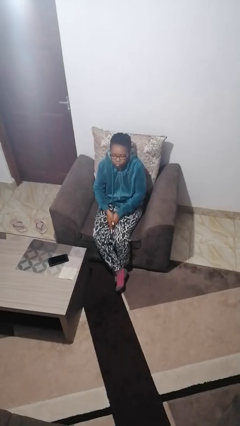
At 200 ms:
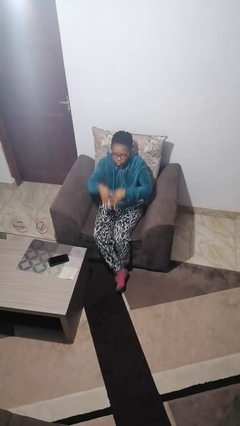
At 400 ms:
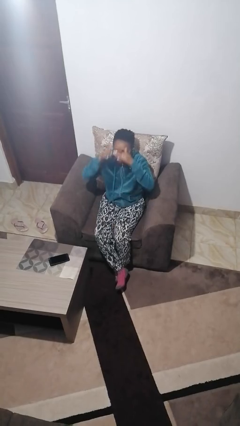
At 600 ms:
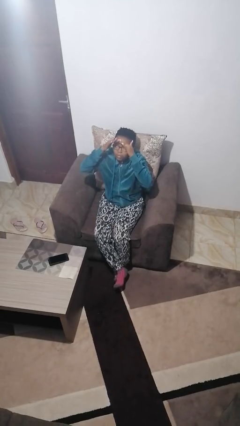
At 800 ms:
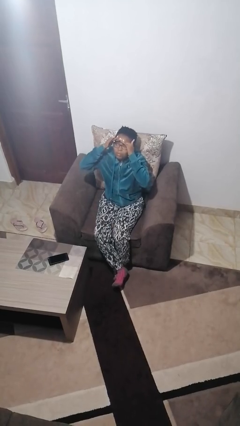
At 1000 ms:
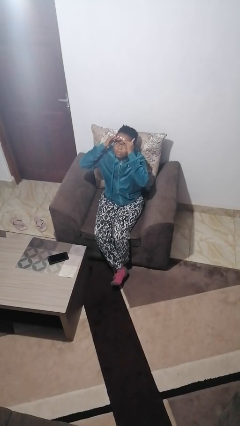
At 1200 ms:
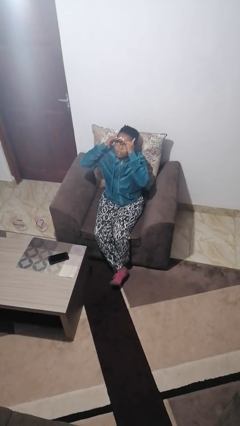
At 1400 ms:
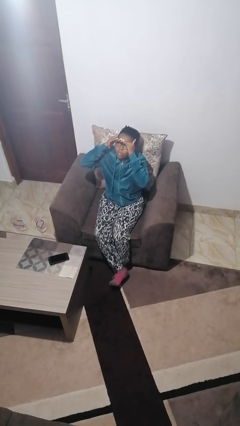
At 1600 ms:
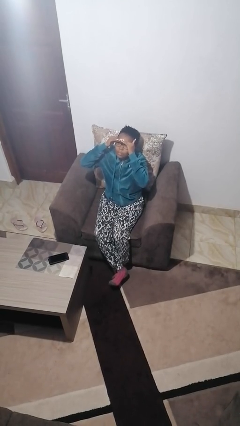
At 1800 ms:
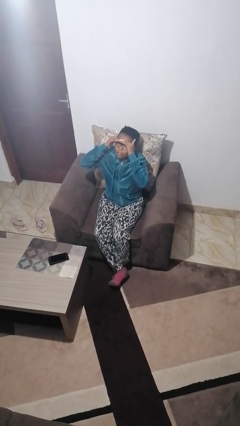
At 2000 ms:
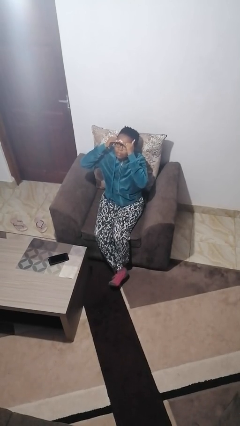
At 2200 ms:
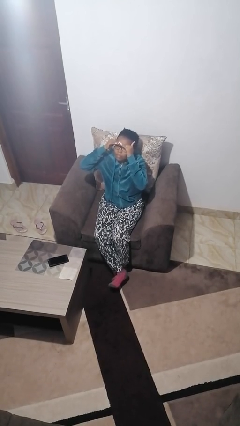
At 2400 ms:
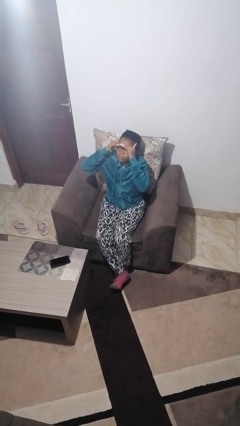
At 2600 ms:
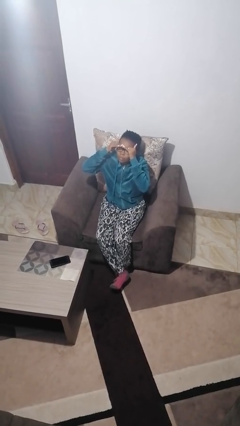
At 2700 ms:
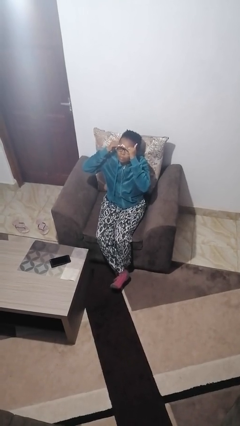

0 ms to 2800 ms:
person shades eyes

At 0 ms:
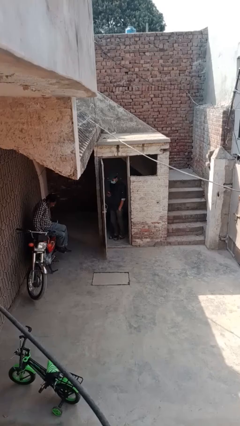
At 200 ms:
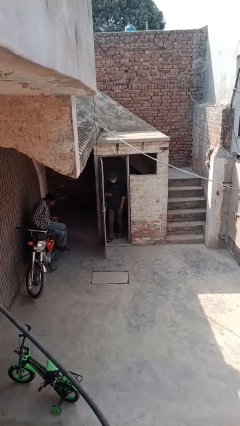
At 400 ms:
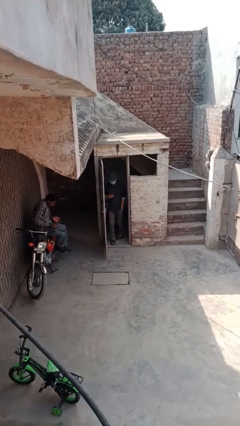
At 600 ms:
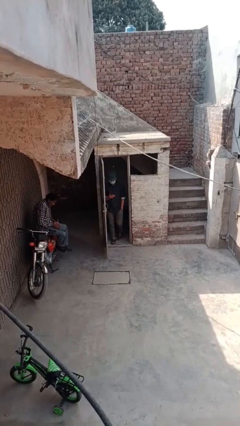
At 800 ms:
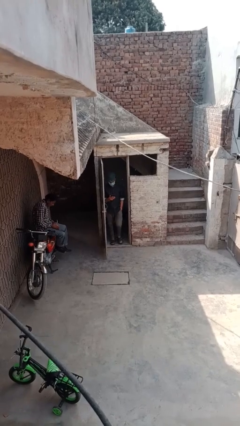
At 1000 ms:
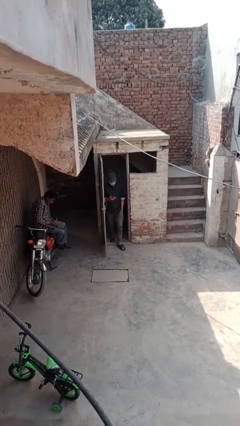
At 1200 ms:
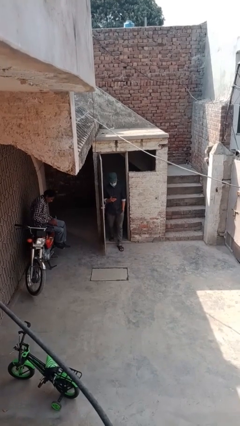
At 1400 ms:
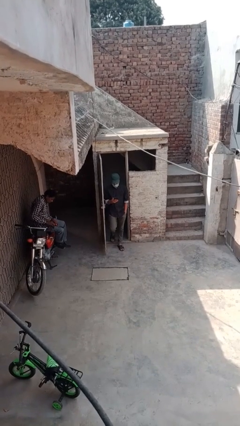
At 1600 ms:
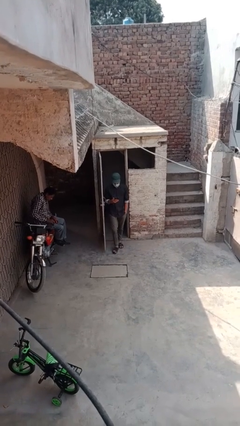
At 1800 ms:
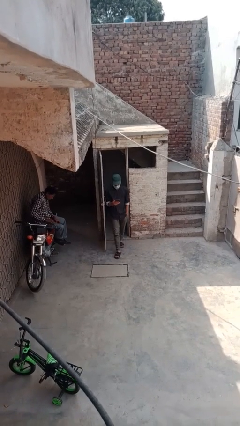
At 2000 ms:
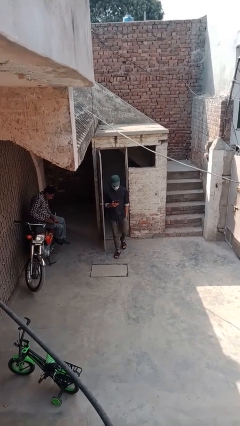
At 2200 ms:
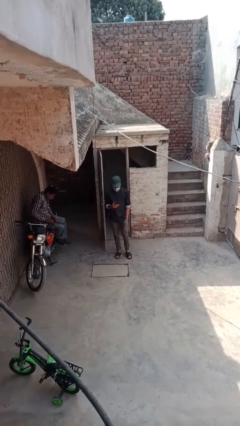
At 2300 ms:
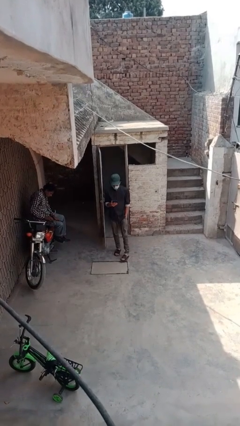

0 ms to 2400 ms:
person enters scene through structure

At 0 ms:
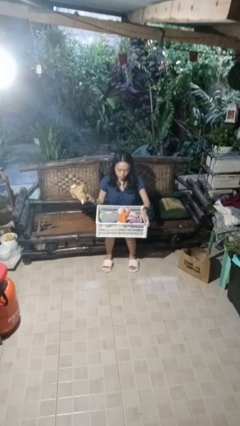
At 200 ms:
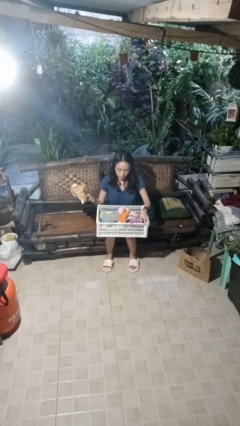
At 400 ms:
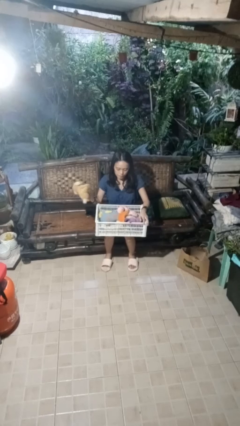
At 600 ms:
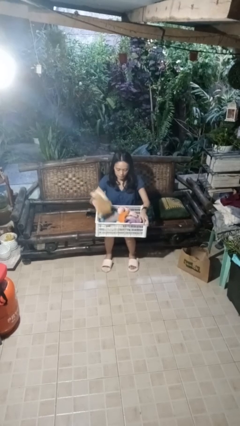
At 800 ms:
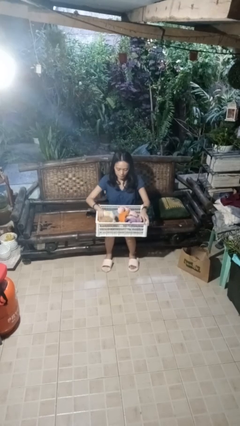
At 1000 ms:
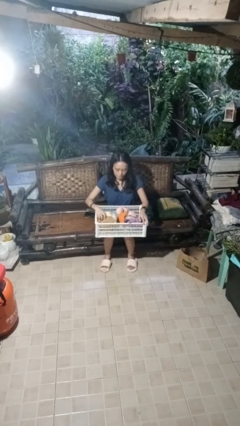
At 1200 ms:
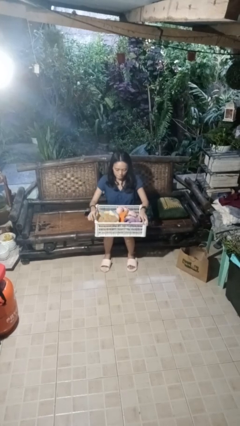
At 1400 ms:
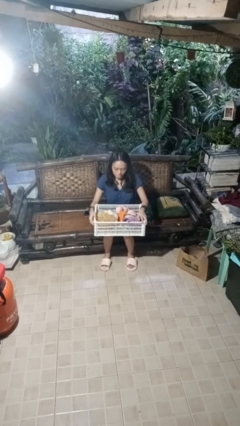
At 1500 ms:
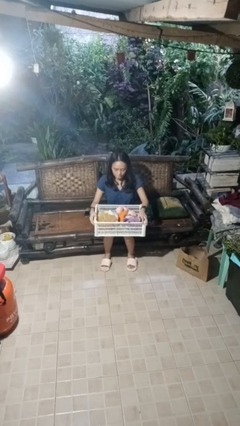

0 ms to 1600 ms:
person puts object into basket

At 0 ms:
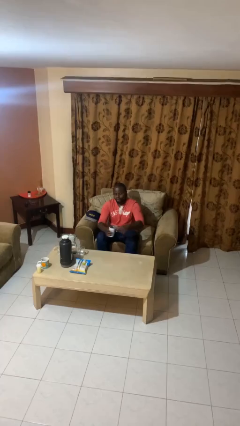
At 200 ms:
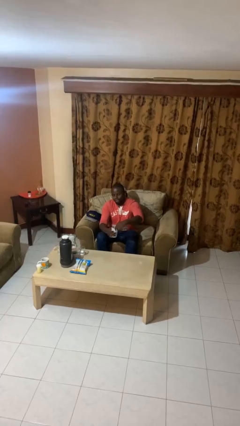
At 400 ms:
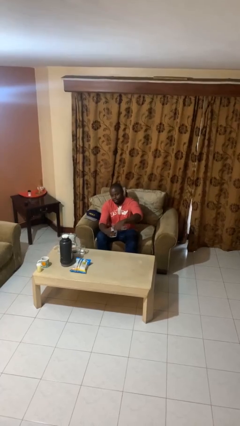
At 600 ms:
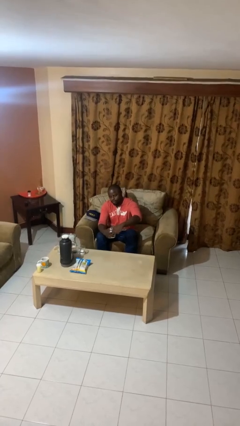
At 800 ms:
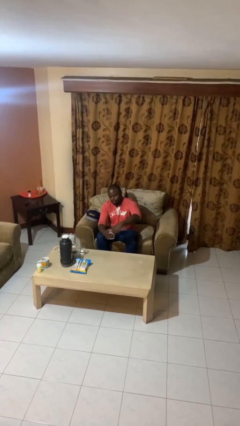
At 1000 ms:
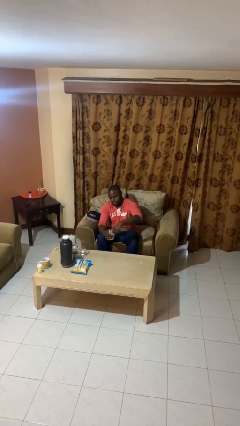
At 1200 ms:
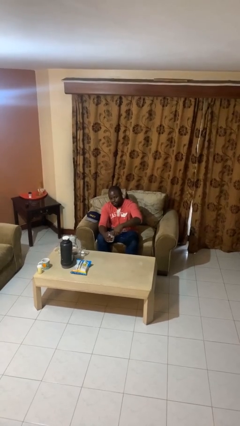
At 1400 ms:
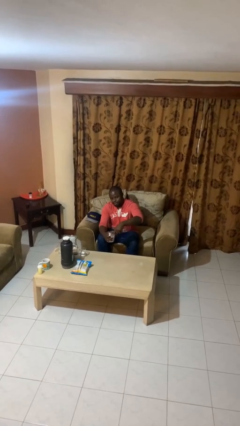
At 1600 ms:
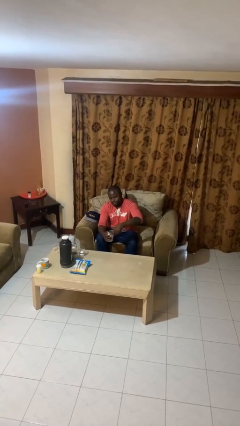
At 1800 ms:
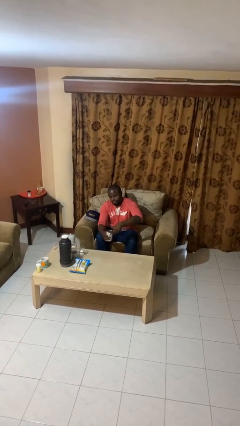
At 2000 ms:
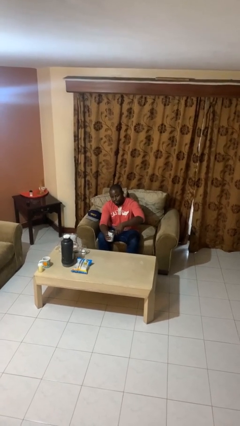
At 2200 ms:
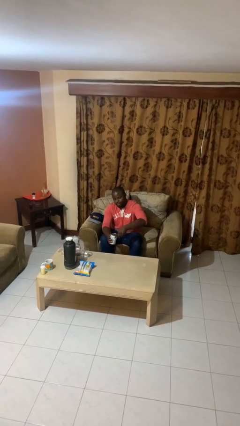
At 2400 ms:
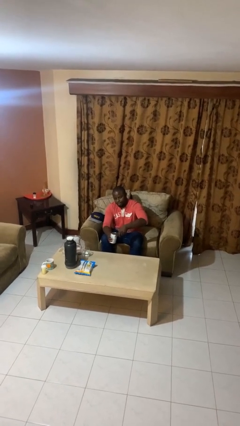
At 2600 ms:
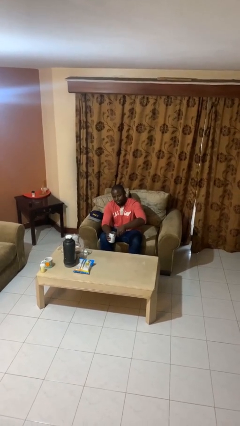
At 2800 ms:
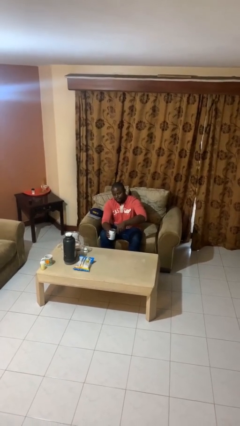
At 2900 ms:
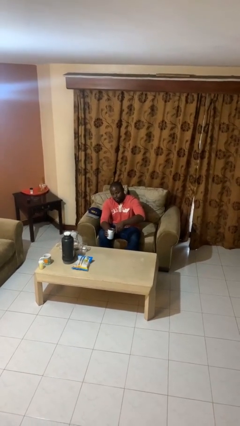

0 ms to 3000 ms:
person opens can with can opener

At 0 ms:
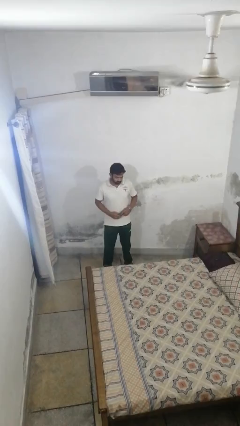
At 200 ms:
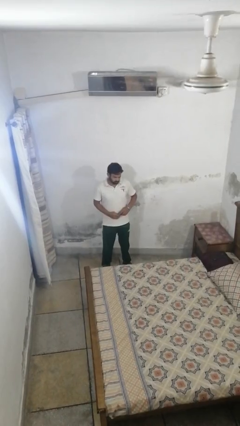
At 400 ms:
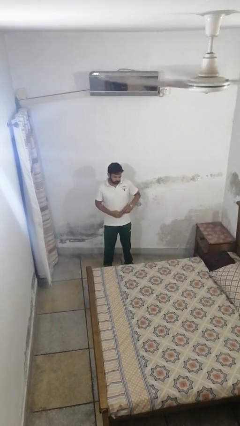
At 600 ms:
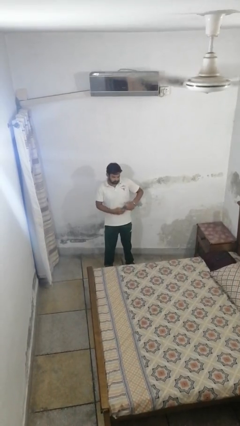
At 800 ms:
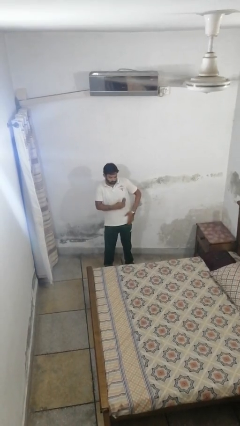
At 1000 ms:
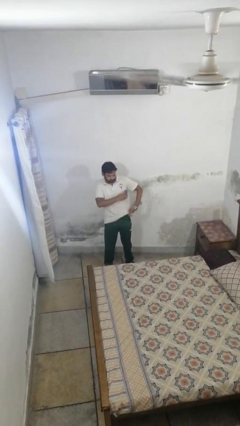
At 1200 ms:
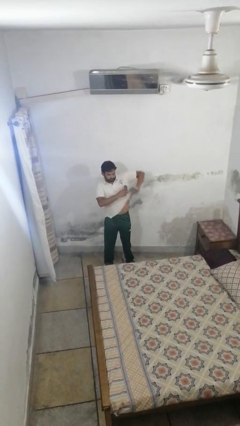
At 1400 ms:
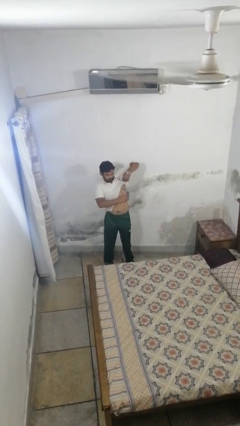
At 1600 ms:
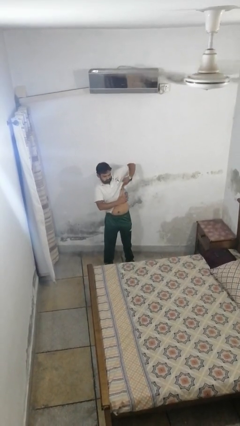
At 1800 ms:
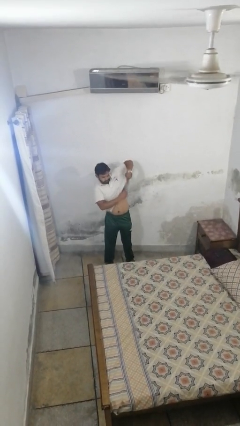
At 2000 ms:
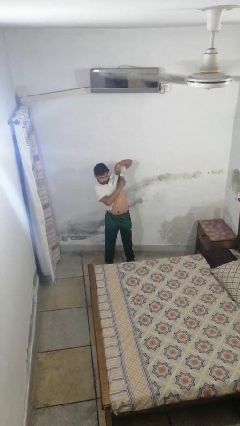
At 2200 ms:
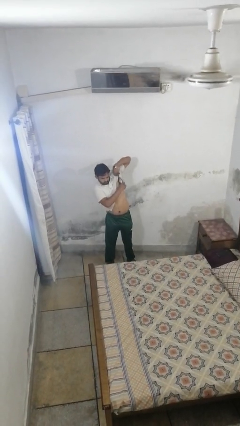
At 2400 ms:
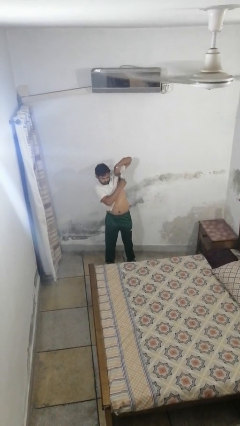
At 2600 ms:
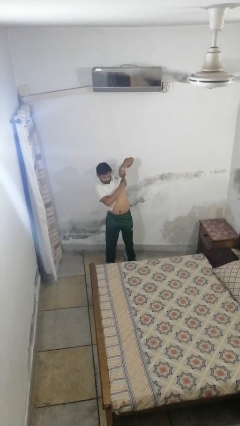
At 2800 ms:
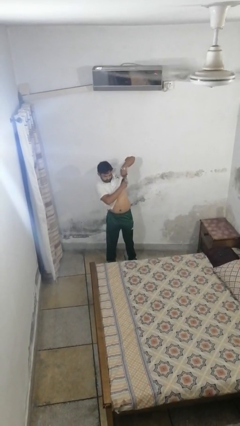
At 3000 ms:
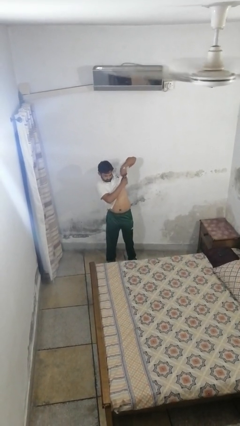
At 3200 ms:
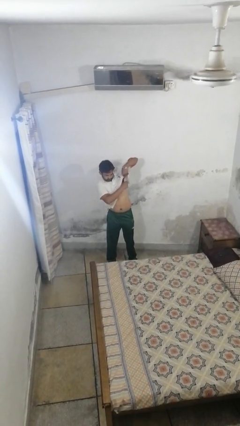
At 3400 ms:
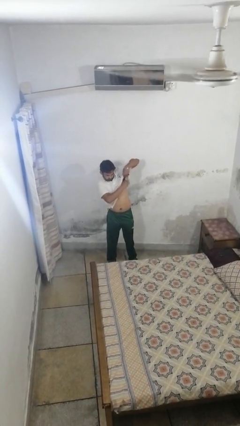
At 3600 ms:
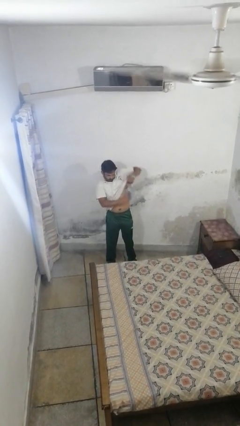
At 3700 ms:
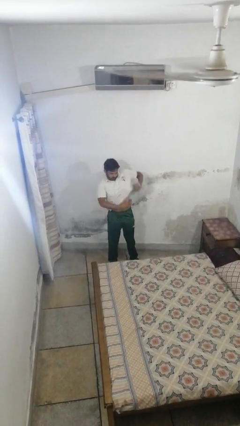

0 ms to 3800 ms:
person applies deodorant

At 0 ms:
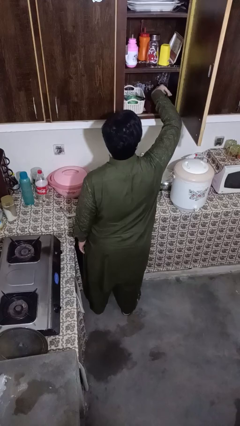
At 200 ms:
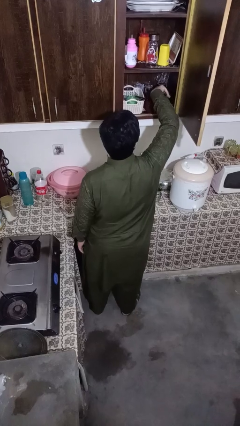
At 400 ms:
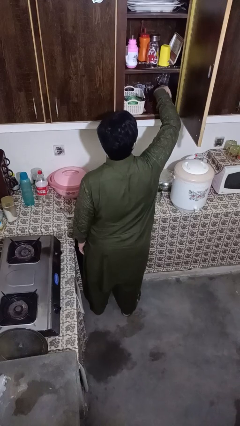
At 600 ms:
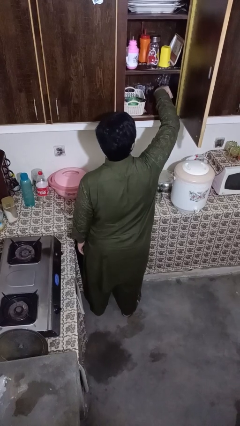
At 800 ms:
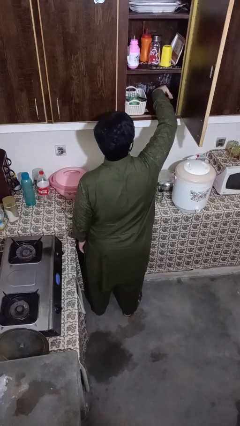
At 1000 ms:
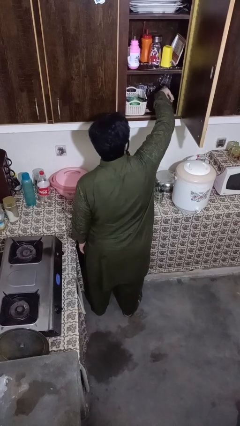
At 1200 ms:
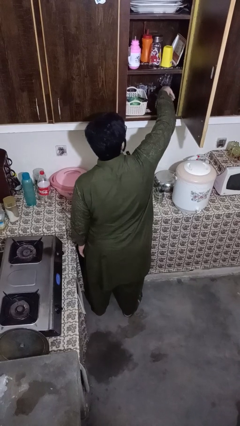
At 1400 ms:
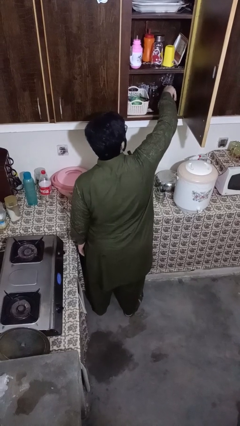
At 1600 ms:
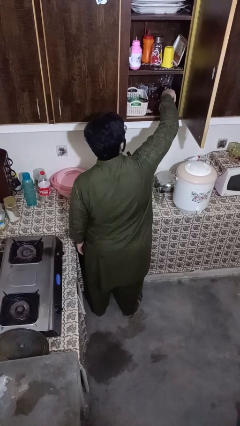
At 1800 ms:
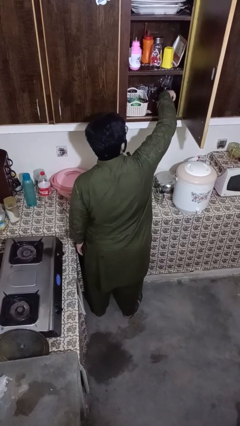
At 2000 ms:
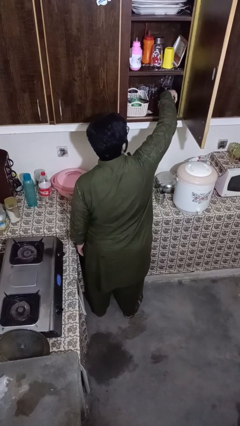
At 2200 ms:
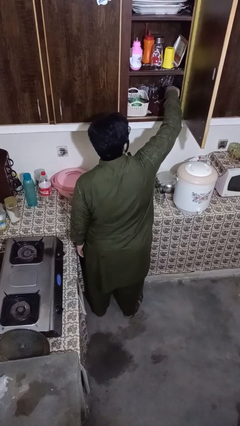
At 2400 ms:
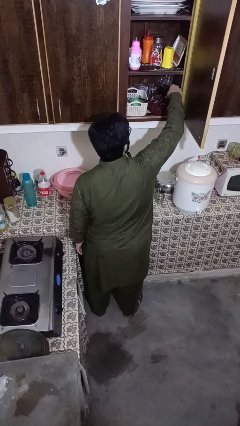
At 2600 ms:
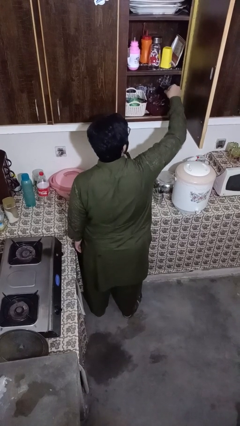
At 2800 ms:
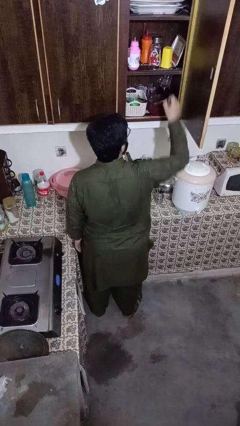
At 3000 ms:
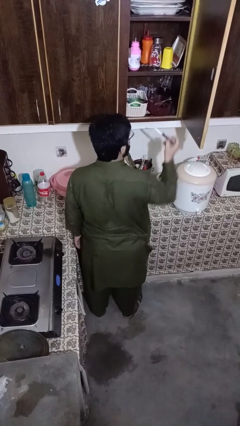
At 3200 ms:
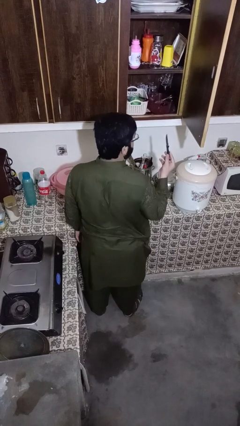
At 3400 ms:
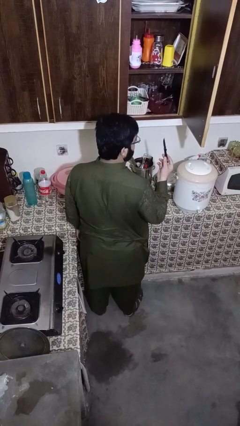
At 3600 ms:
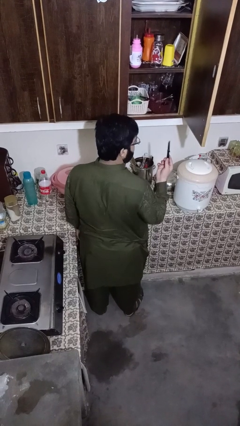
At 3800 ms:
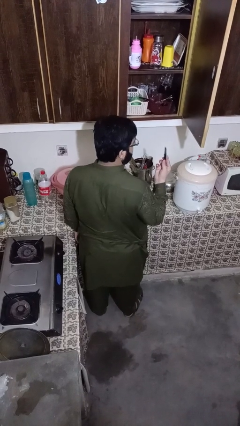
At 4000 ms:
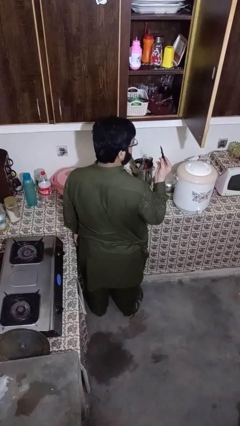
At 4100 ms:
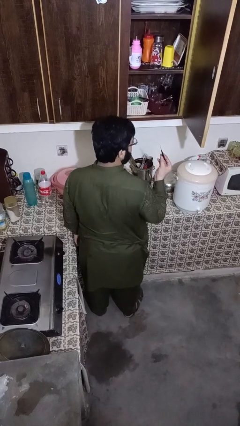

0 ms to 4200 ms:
person takes object from kitchen drawer
